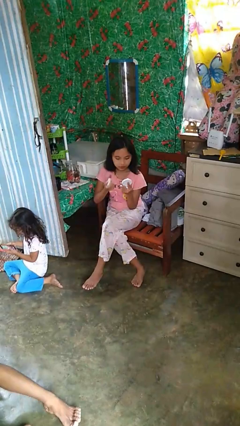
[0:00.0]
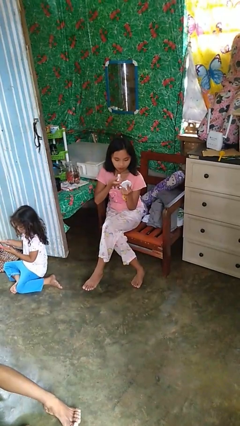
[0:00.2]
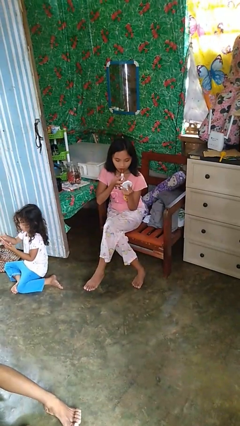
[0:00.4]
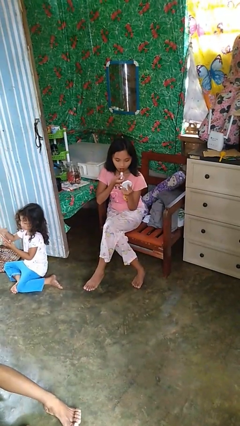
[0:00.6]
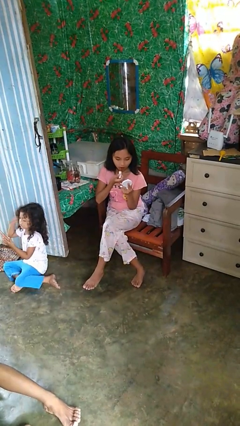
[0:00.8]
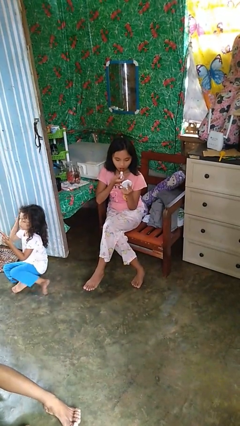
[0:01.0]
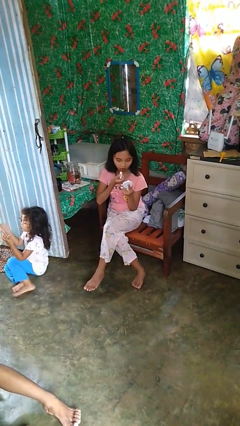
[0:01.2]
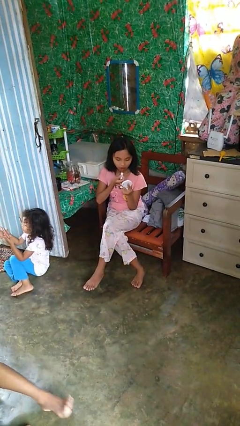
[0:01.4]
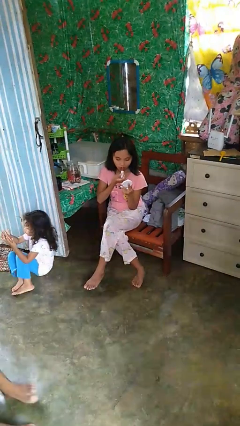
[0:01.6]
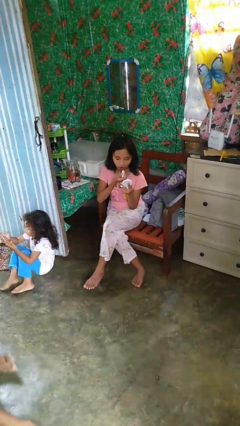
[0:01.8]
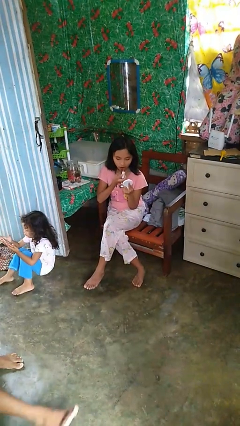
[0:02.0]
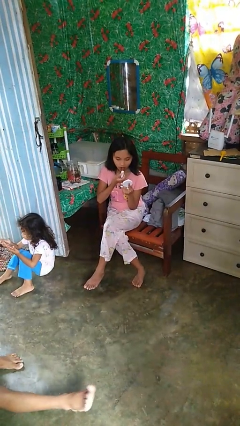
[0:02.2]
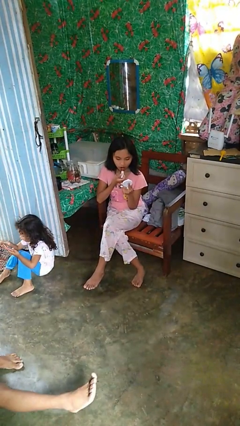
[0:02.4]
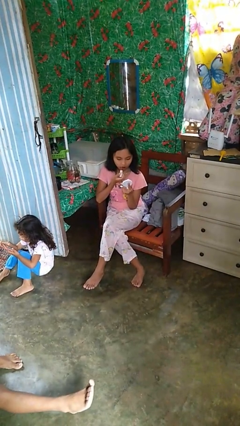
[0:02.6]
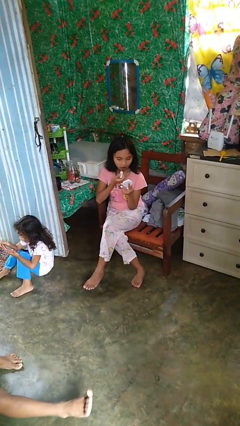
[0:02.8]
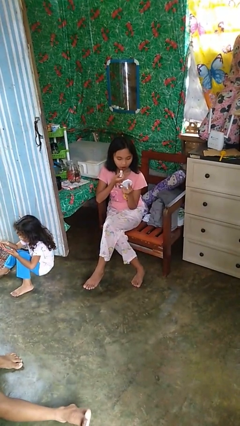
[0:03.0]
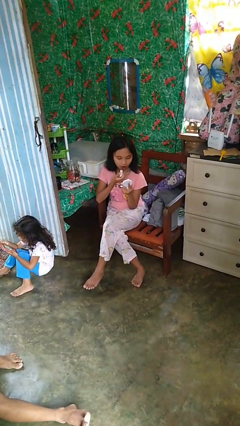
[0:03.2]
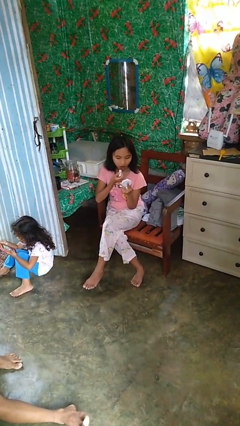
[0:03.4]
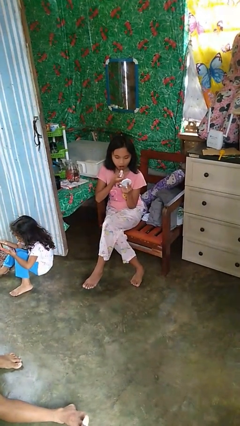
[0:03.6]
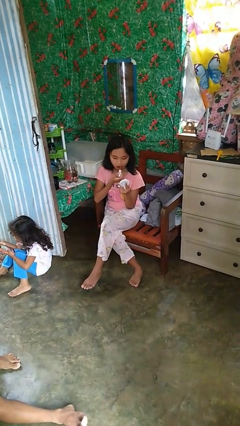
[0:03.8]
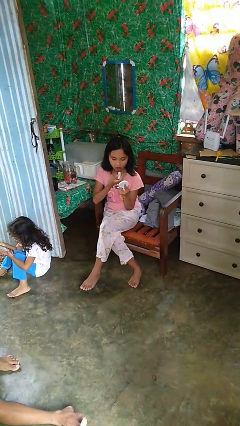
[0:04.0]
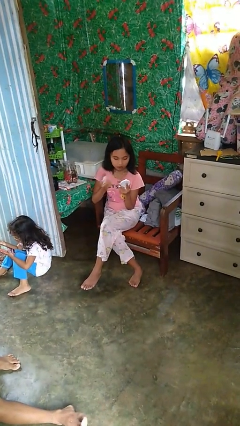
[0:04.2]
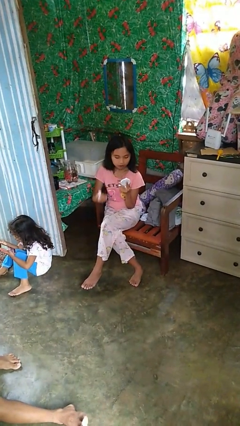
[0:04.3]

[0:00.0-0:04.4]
person applies lip makeup

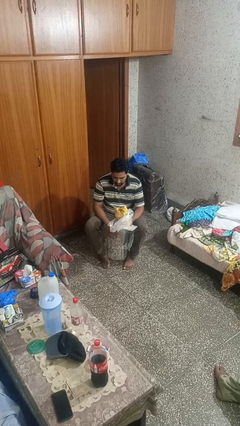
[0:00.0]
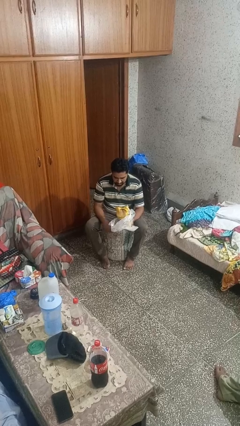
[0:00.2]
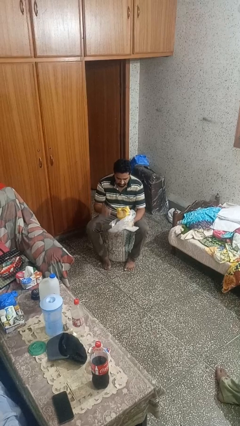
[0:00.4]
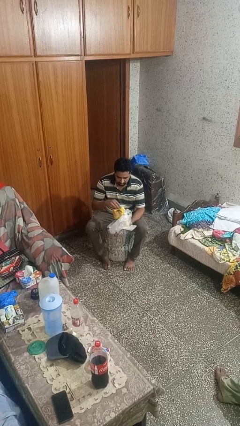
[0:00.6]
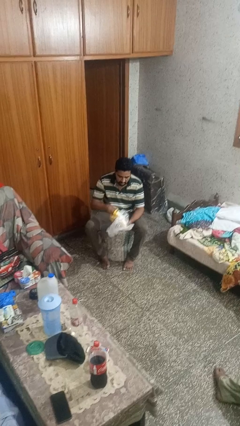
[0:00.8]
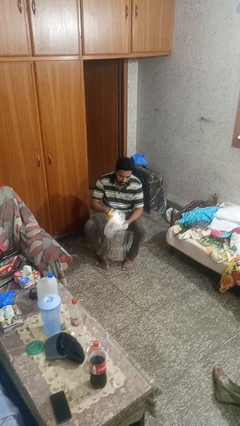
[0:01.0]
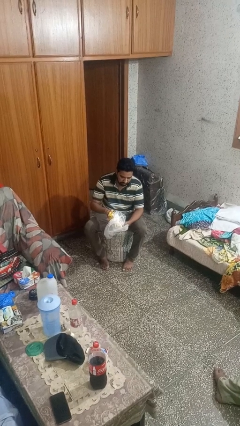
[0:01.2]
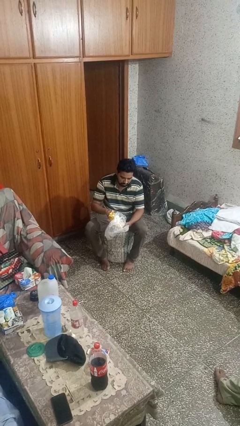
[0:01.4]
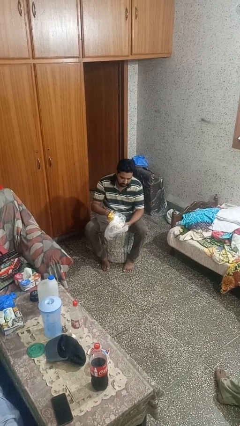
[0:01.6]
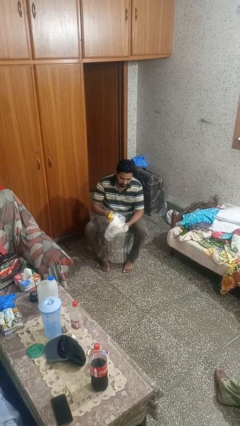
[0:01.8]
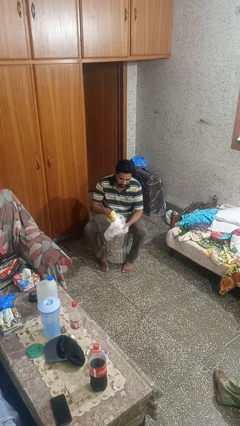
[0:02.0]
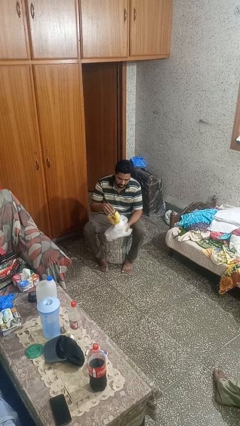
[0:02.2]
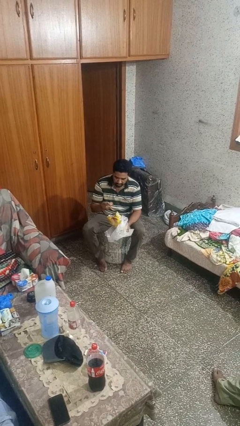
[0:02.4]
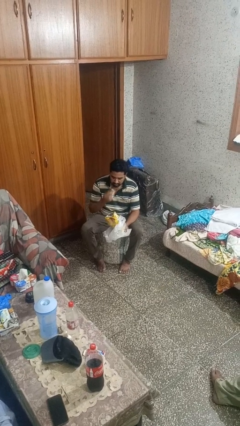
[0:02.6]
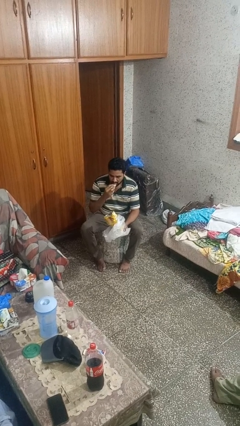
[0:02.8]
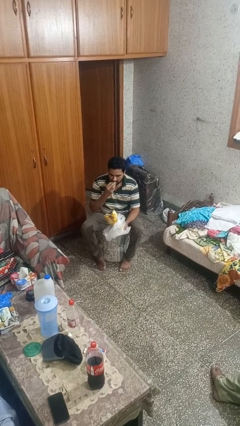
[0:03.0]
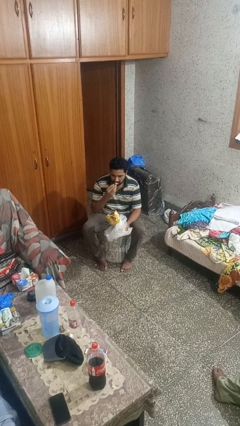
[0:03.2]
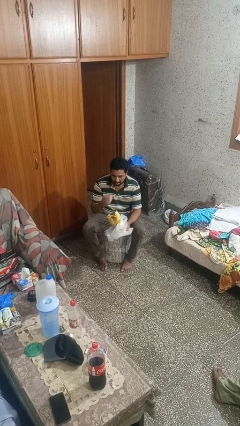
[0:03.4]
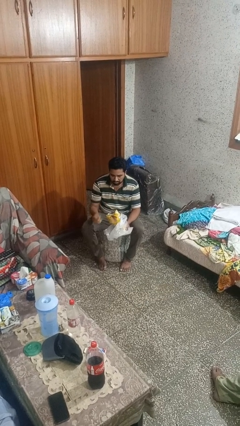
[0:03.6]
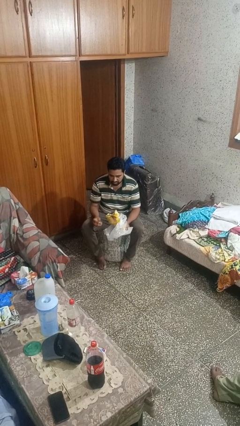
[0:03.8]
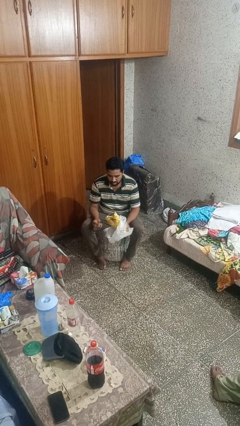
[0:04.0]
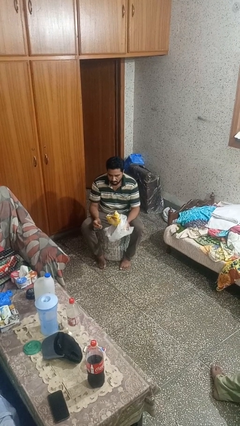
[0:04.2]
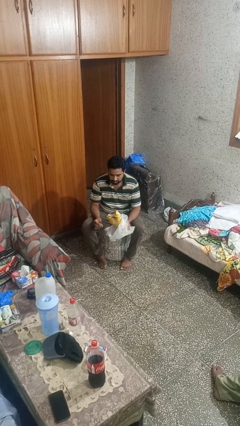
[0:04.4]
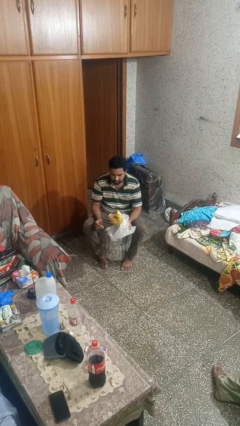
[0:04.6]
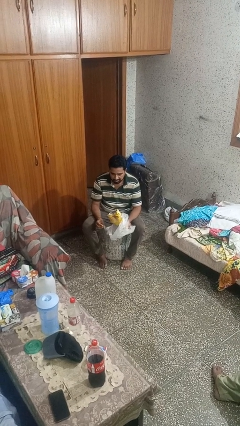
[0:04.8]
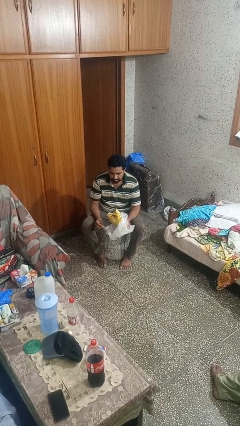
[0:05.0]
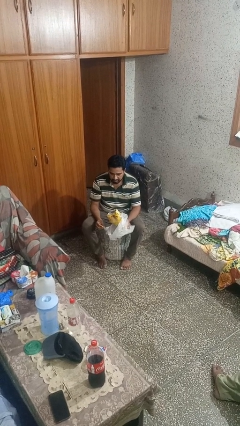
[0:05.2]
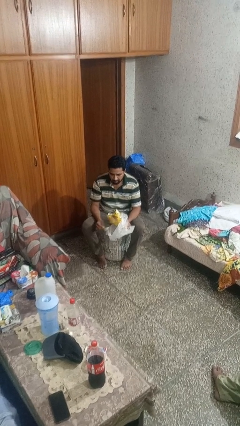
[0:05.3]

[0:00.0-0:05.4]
person eats snack from bag

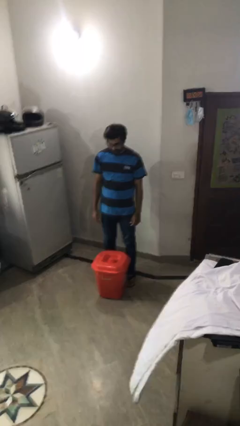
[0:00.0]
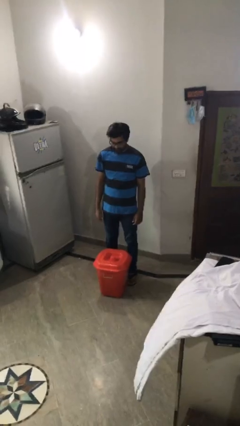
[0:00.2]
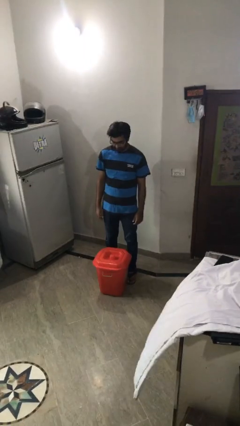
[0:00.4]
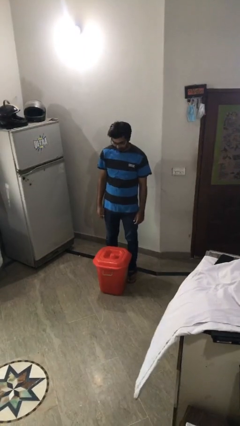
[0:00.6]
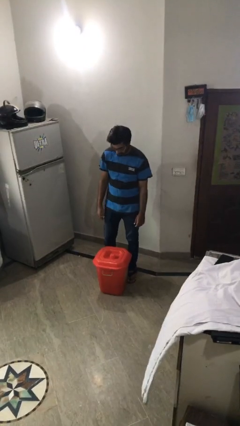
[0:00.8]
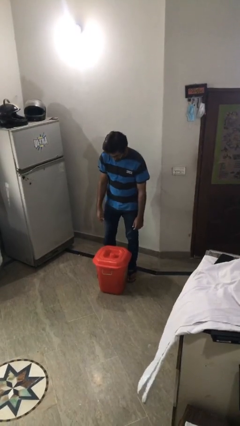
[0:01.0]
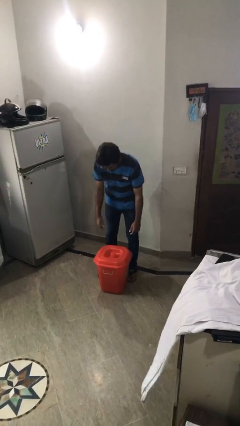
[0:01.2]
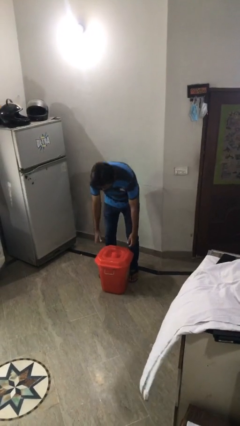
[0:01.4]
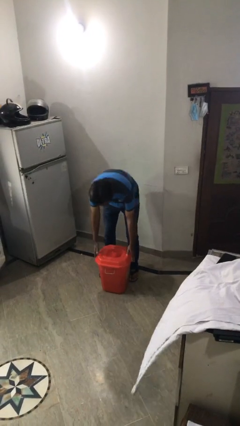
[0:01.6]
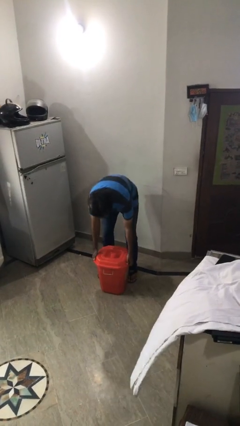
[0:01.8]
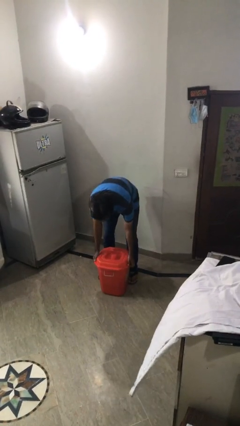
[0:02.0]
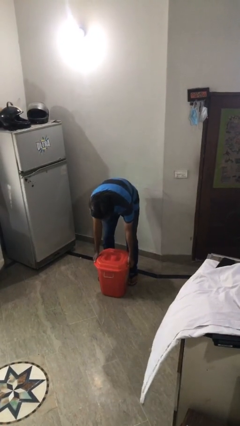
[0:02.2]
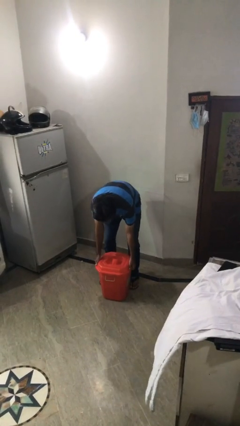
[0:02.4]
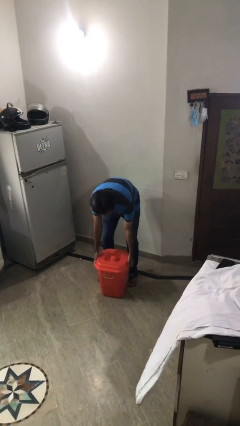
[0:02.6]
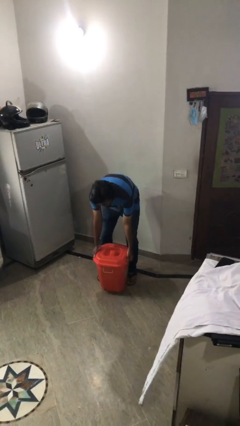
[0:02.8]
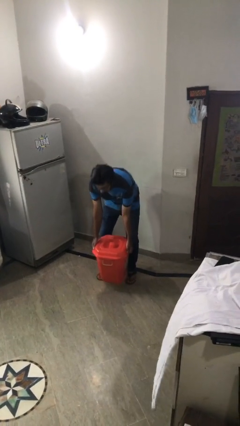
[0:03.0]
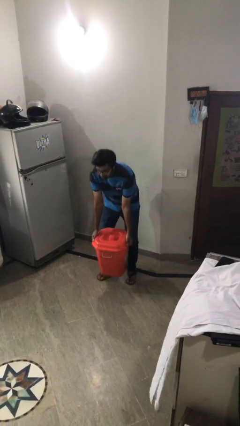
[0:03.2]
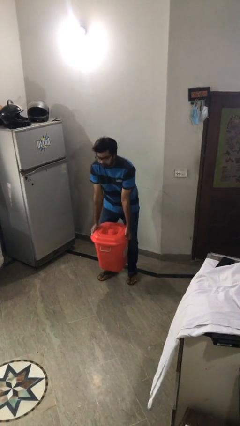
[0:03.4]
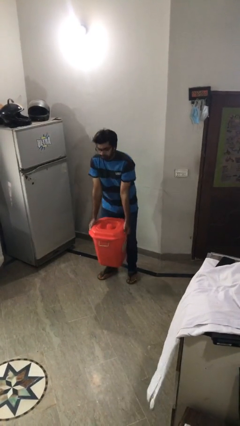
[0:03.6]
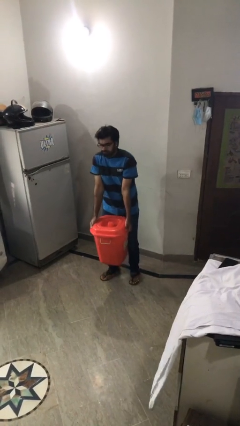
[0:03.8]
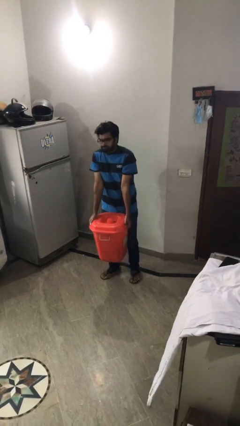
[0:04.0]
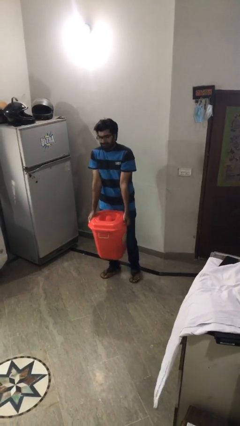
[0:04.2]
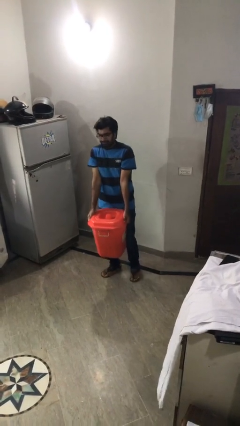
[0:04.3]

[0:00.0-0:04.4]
person picks up object from floor

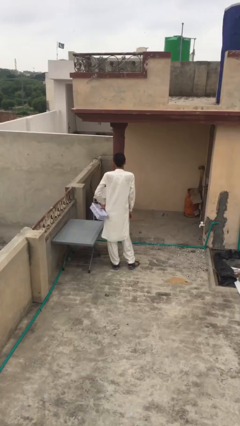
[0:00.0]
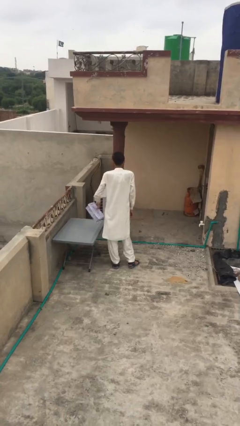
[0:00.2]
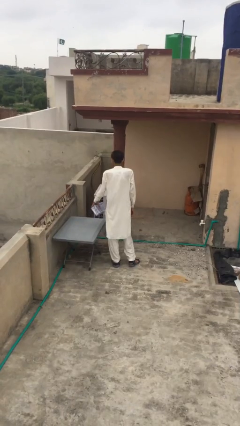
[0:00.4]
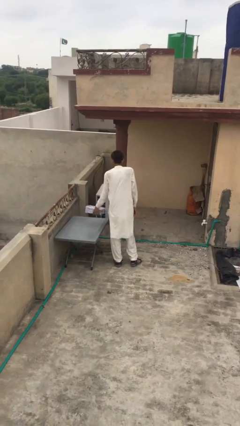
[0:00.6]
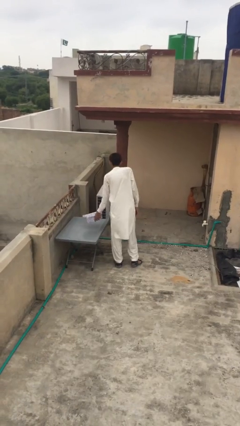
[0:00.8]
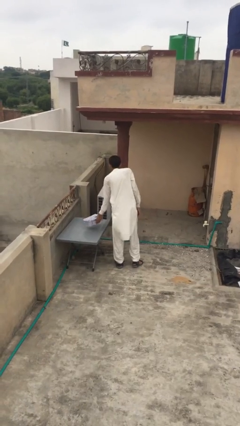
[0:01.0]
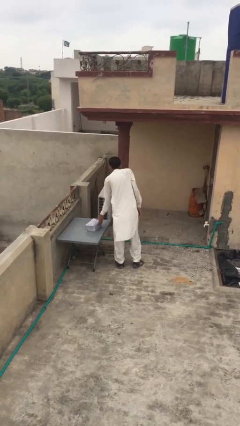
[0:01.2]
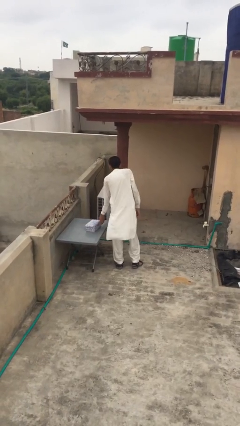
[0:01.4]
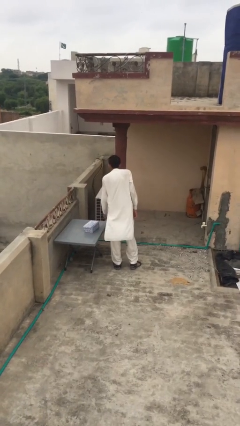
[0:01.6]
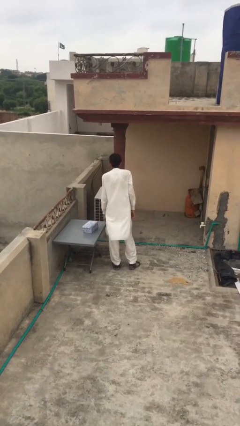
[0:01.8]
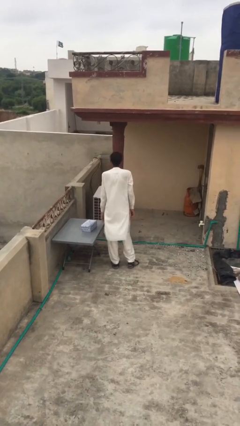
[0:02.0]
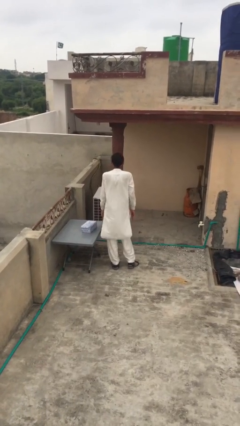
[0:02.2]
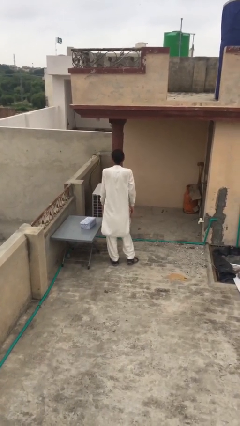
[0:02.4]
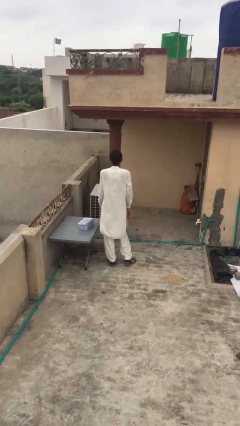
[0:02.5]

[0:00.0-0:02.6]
person puts down object on table

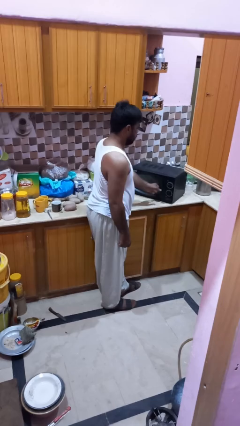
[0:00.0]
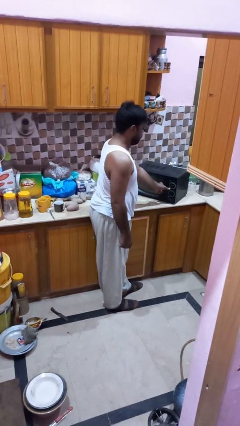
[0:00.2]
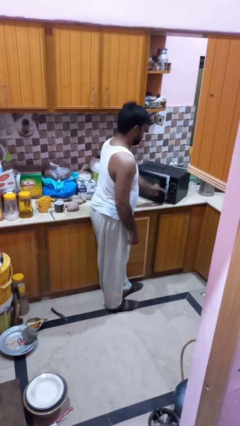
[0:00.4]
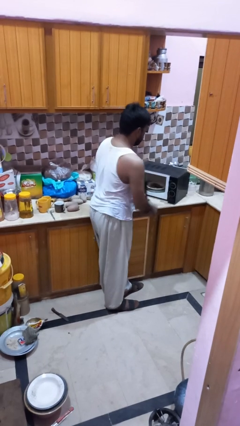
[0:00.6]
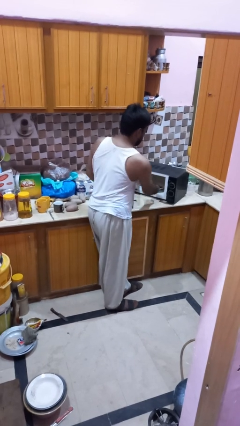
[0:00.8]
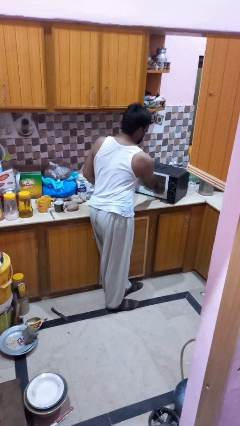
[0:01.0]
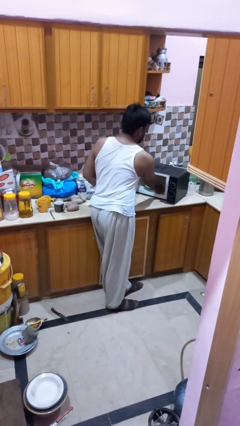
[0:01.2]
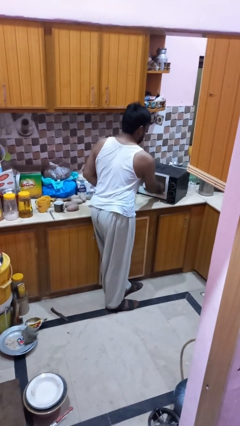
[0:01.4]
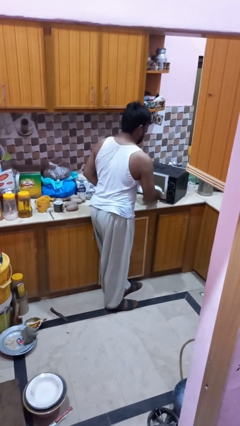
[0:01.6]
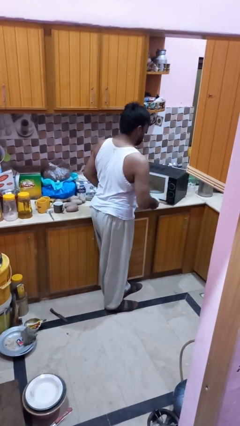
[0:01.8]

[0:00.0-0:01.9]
person takes object from microwave
